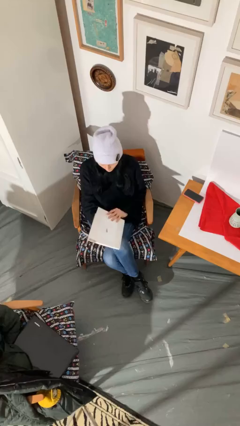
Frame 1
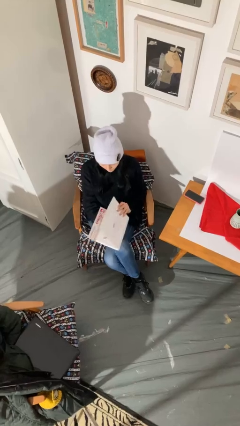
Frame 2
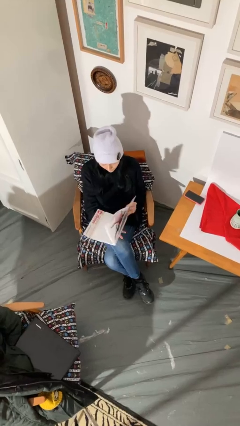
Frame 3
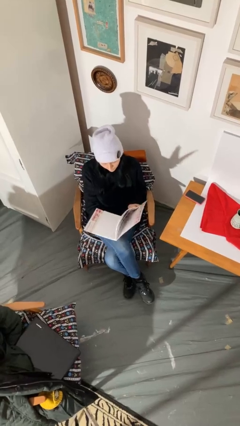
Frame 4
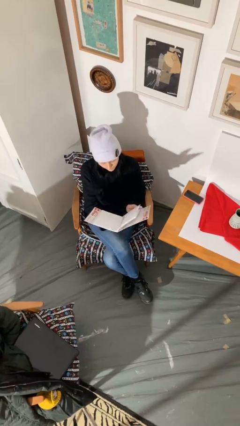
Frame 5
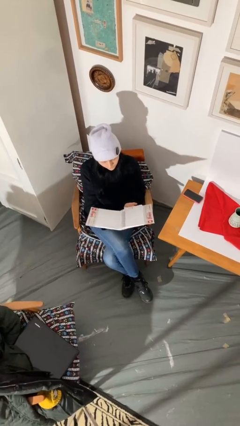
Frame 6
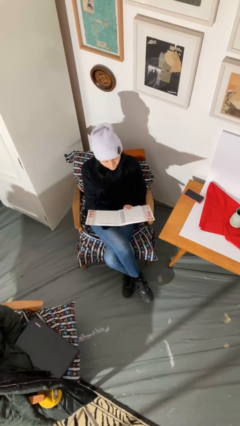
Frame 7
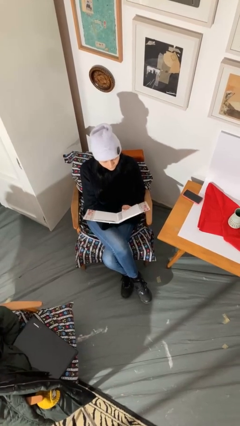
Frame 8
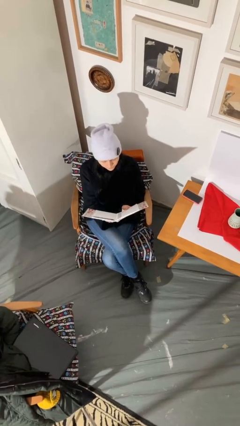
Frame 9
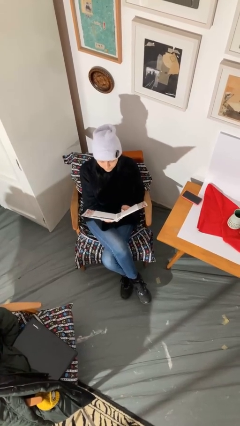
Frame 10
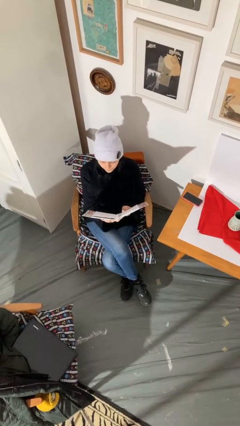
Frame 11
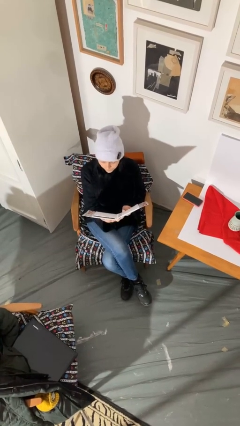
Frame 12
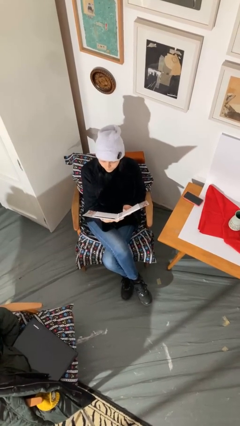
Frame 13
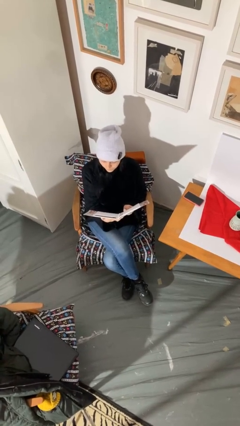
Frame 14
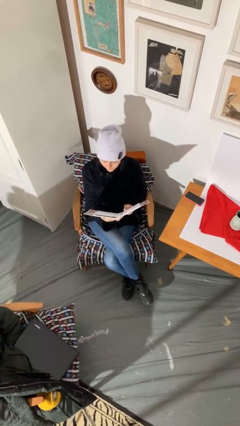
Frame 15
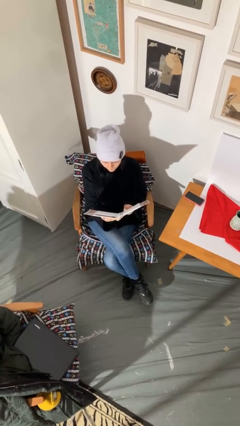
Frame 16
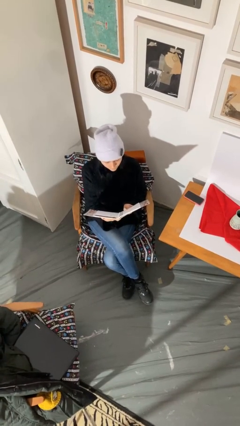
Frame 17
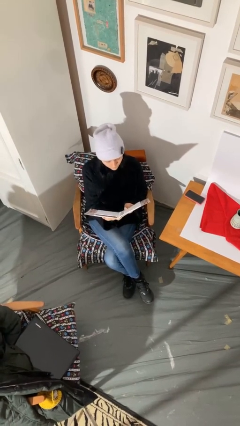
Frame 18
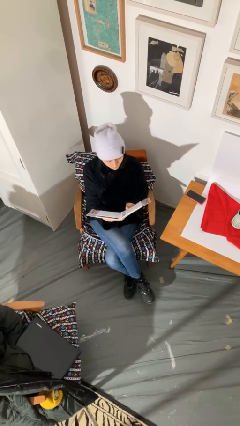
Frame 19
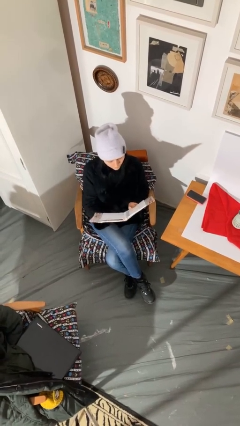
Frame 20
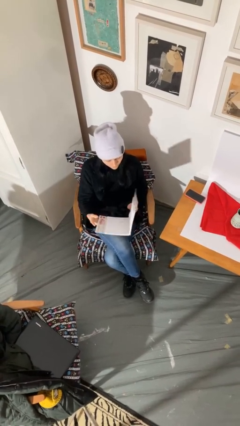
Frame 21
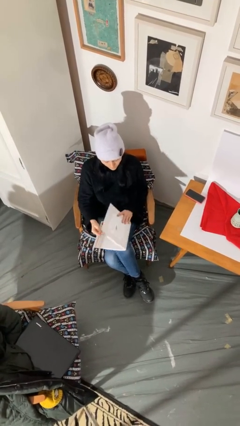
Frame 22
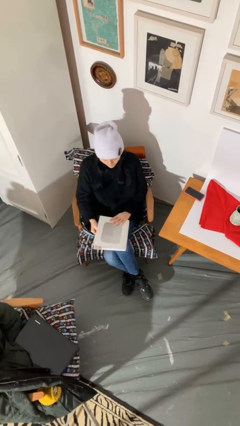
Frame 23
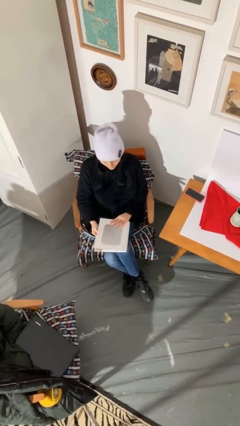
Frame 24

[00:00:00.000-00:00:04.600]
person reads document

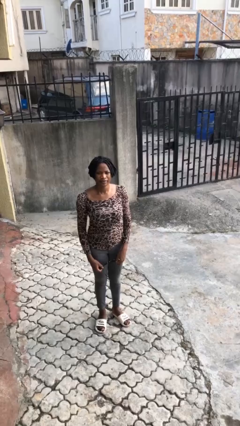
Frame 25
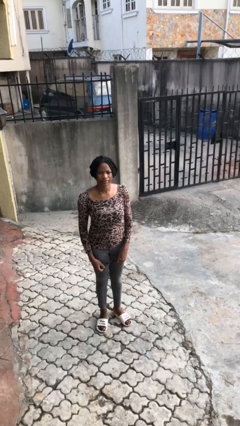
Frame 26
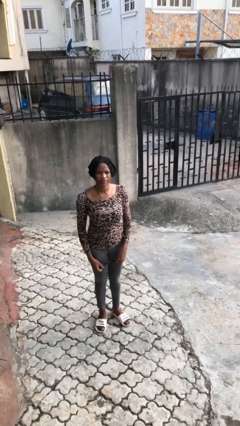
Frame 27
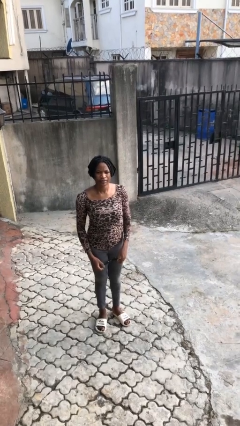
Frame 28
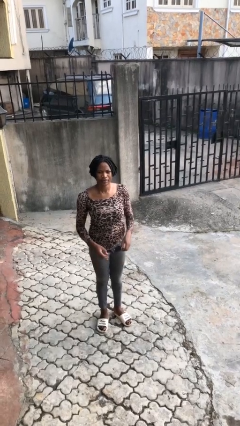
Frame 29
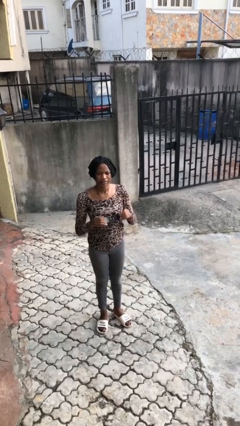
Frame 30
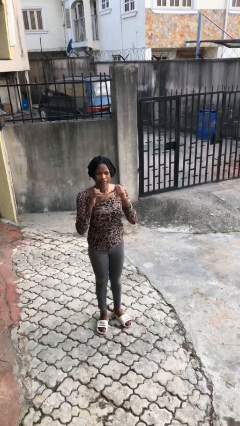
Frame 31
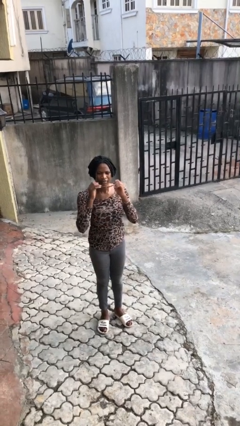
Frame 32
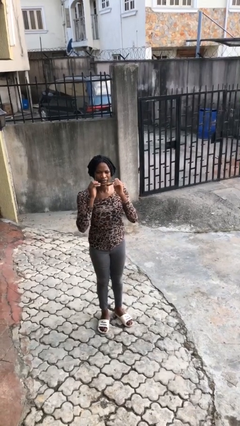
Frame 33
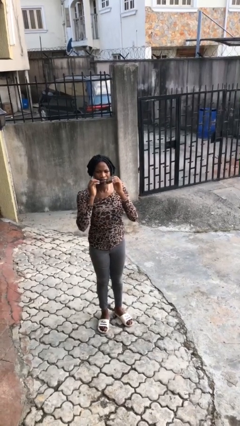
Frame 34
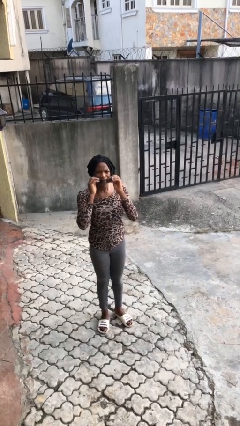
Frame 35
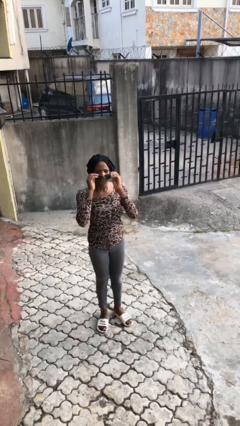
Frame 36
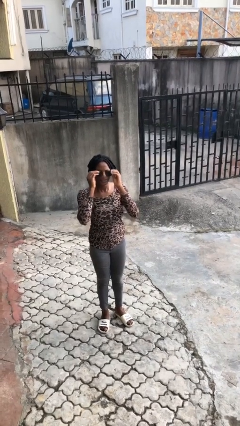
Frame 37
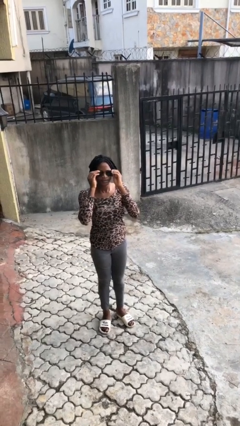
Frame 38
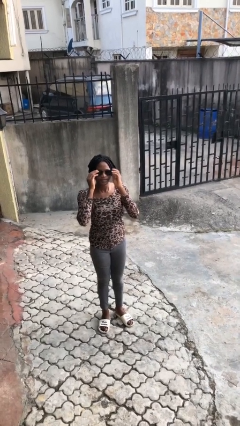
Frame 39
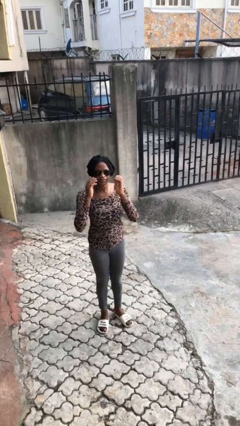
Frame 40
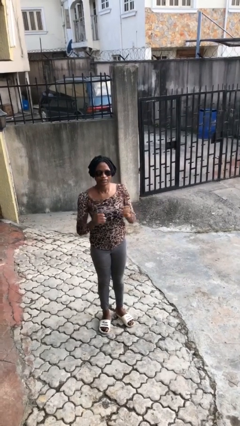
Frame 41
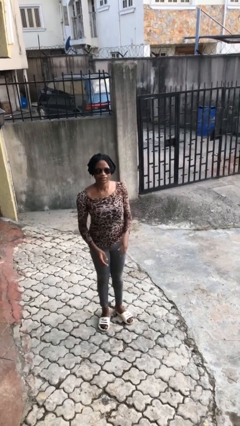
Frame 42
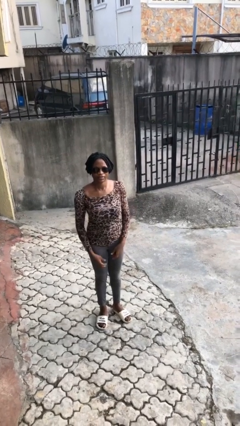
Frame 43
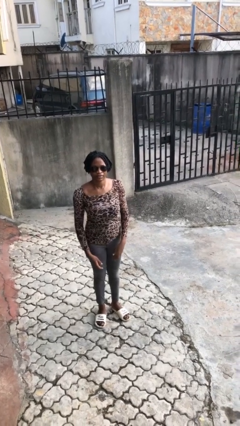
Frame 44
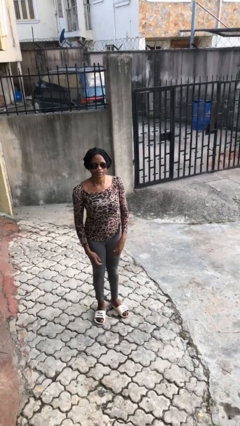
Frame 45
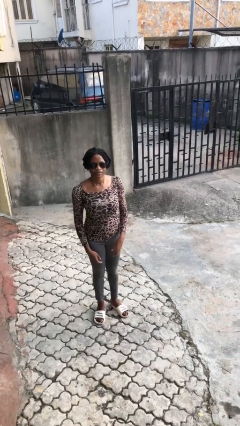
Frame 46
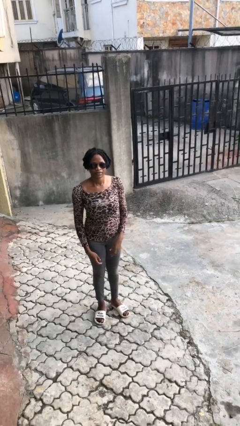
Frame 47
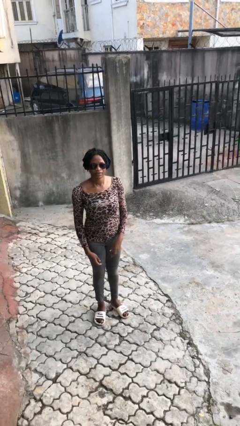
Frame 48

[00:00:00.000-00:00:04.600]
person puts on sunglasses

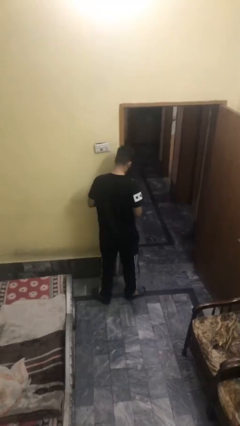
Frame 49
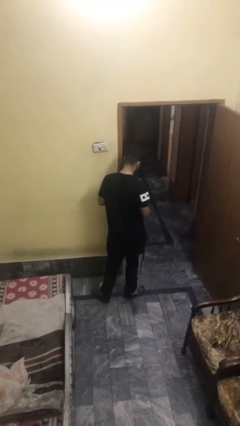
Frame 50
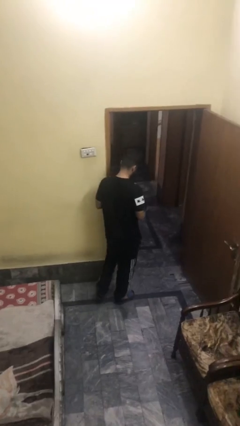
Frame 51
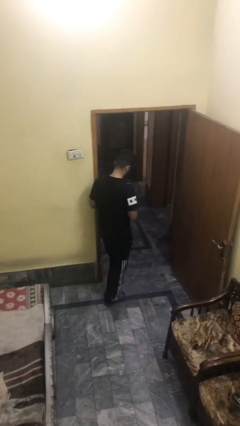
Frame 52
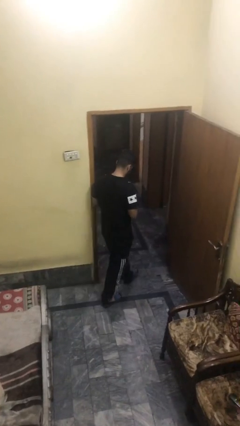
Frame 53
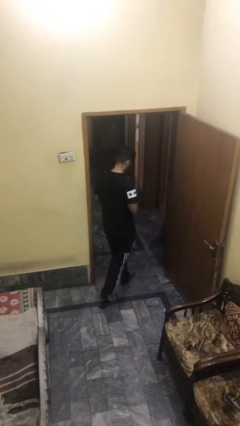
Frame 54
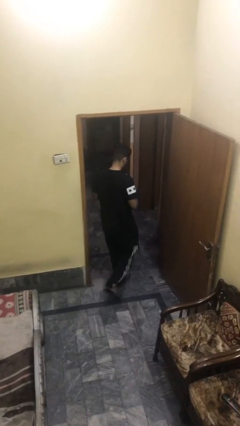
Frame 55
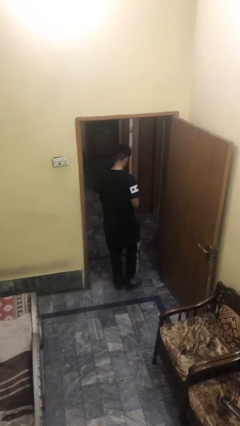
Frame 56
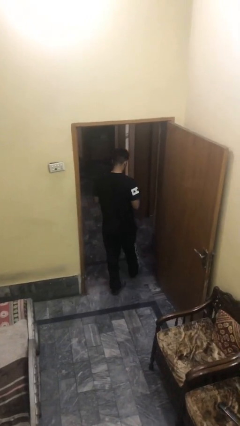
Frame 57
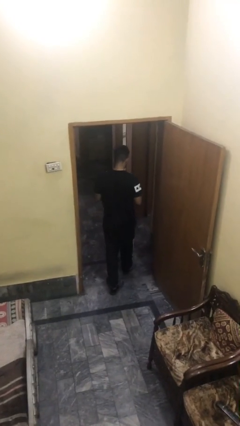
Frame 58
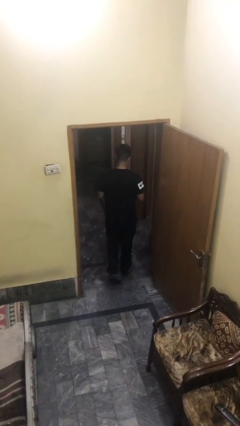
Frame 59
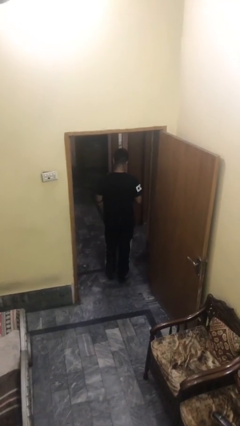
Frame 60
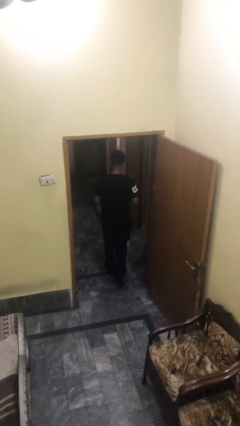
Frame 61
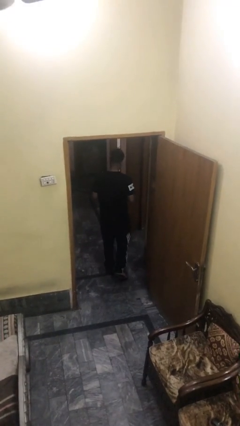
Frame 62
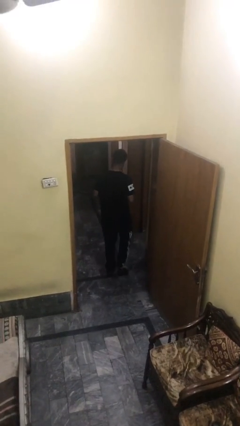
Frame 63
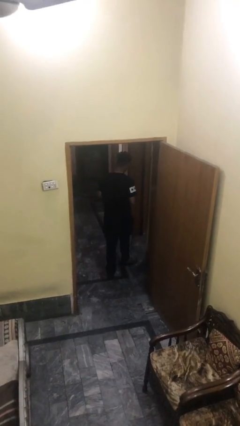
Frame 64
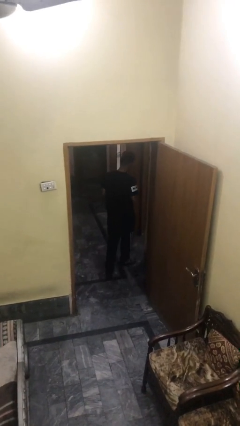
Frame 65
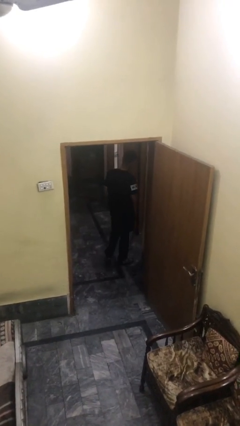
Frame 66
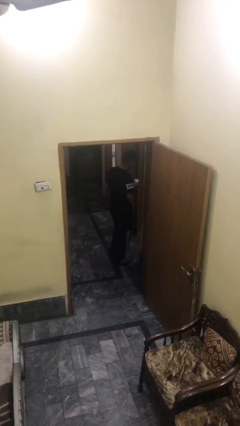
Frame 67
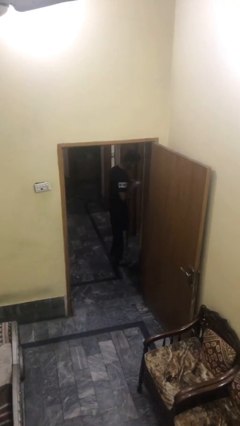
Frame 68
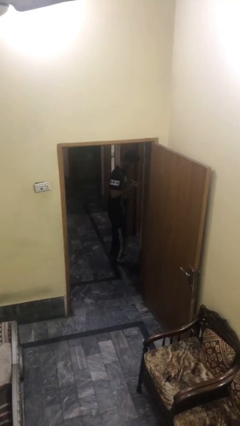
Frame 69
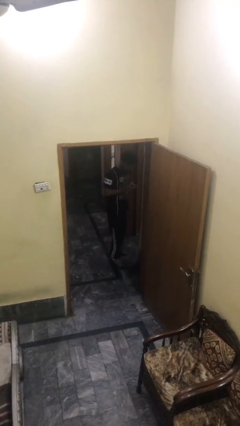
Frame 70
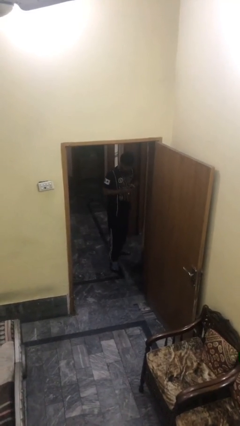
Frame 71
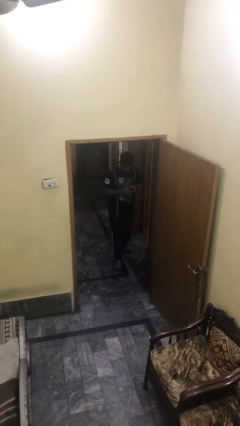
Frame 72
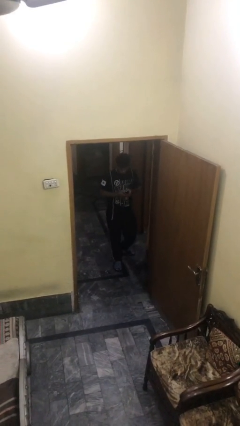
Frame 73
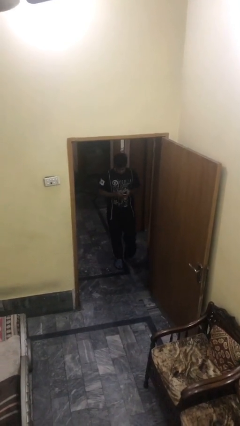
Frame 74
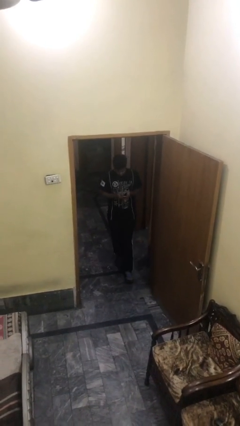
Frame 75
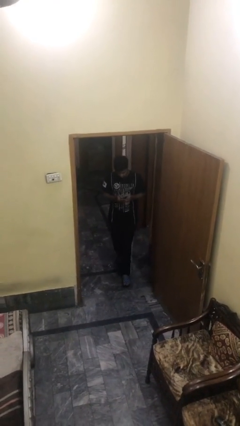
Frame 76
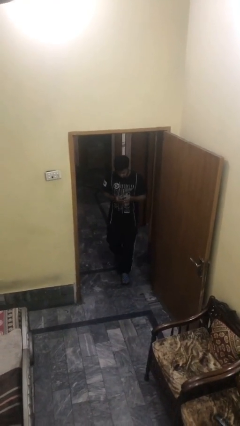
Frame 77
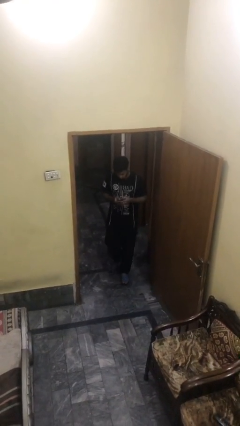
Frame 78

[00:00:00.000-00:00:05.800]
person exits scene through structure

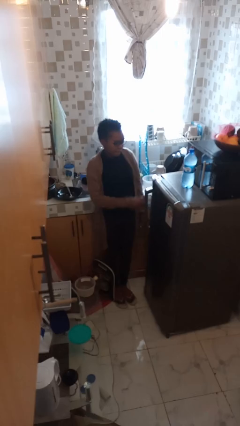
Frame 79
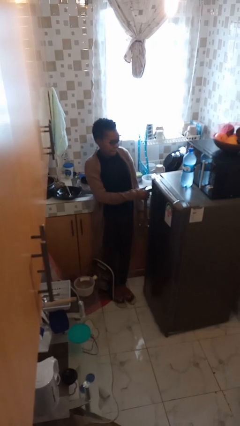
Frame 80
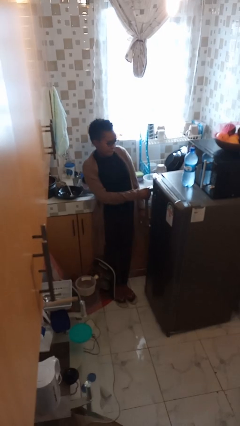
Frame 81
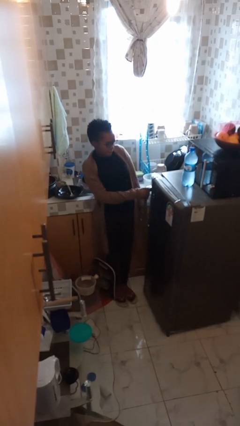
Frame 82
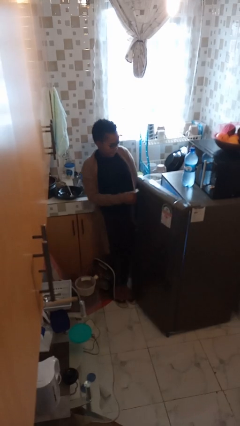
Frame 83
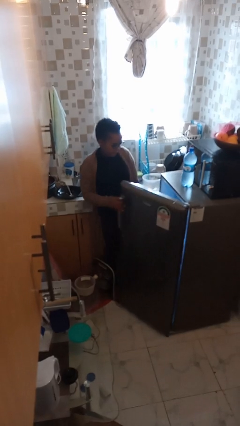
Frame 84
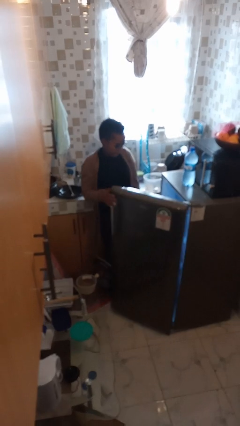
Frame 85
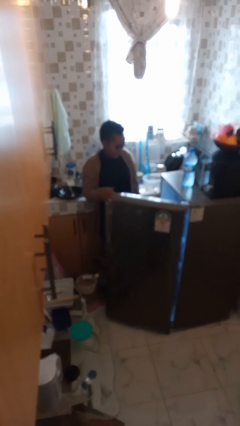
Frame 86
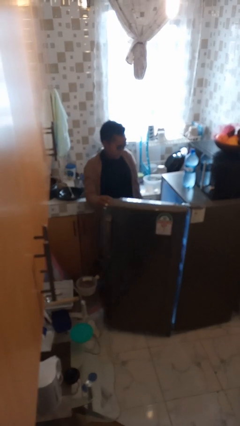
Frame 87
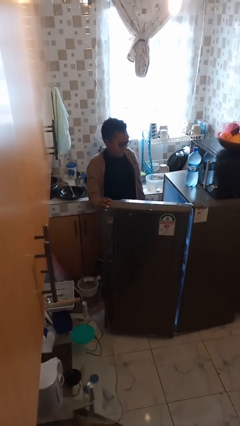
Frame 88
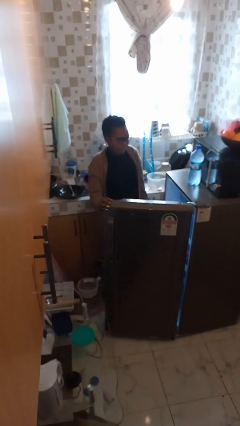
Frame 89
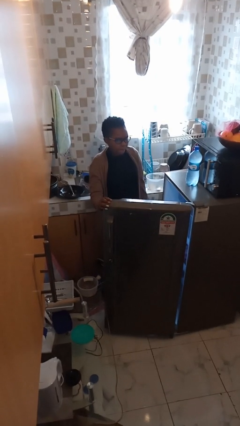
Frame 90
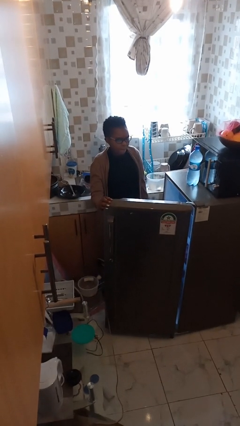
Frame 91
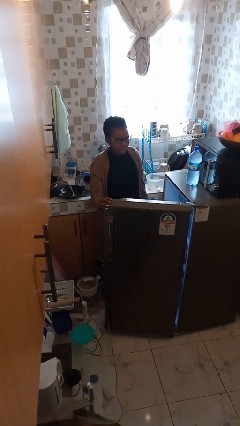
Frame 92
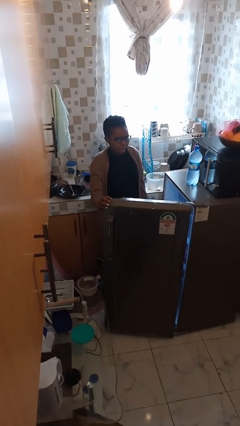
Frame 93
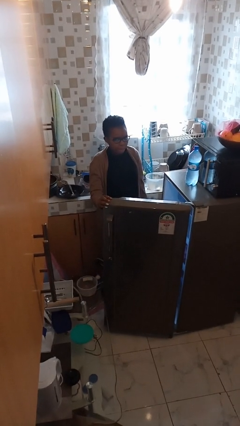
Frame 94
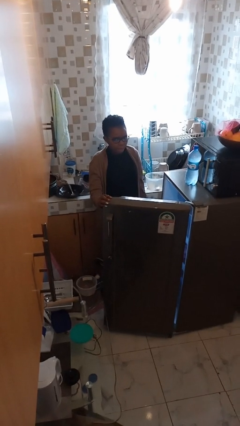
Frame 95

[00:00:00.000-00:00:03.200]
person opens refrigerator
